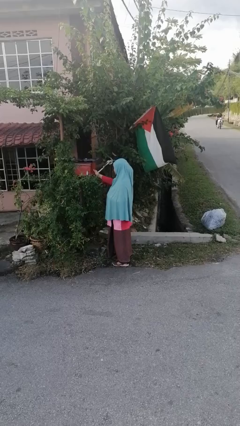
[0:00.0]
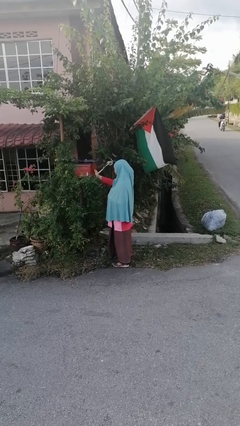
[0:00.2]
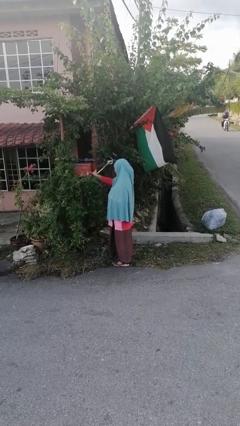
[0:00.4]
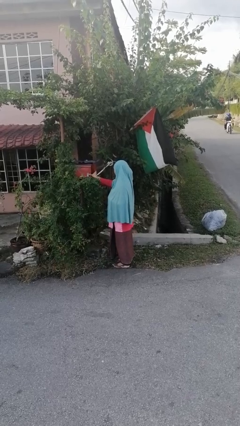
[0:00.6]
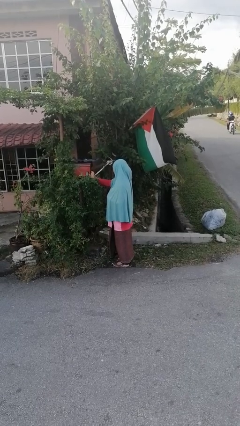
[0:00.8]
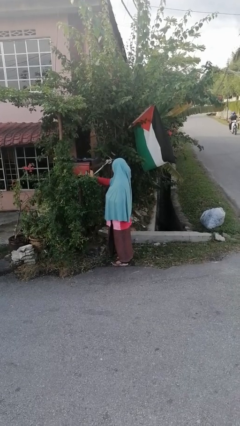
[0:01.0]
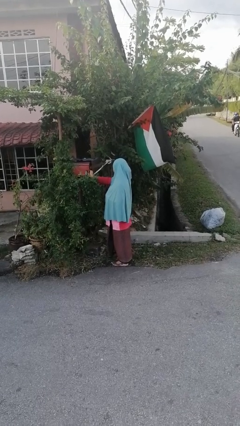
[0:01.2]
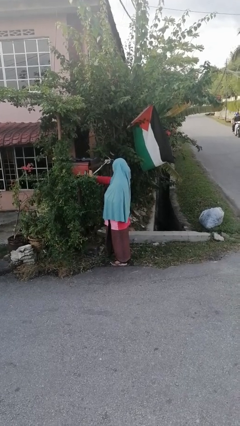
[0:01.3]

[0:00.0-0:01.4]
person closes mailbox

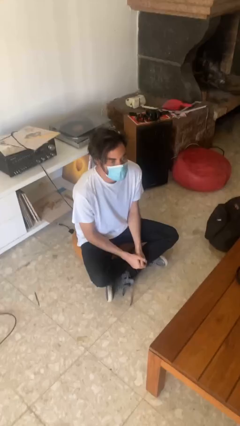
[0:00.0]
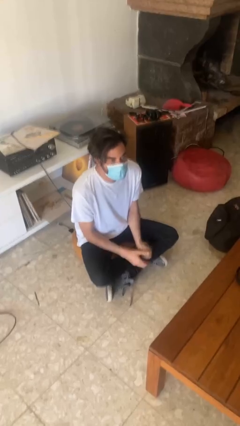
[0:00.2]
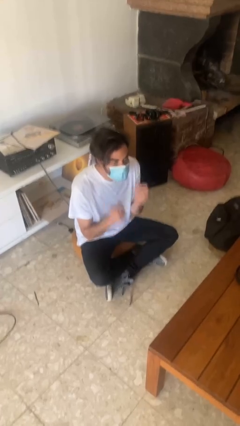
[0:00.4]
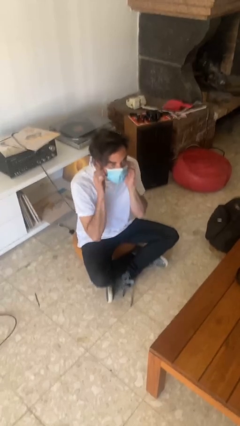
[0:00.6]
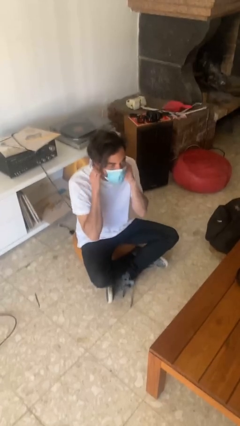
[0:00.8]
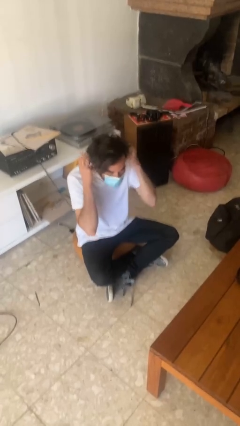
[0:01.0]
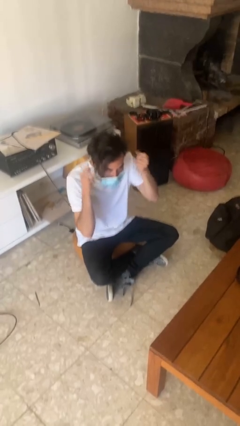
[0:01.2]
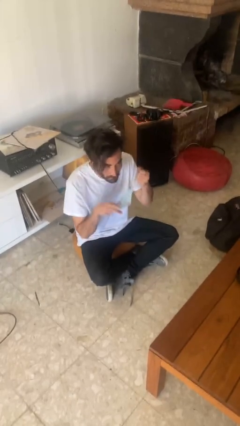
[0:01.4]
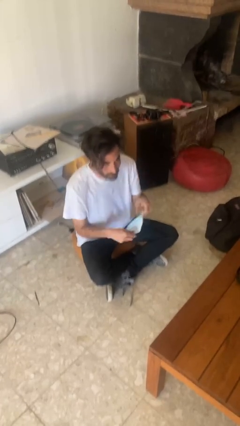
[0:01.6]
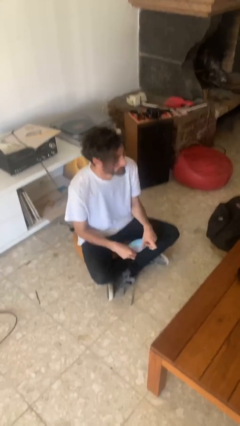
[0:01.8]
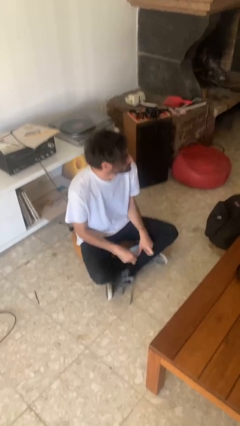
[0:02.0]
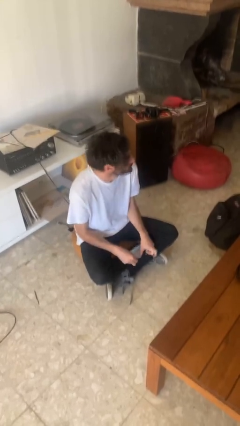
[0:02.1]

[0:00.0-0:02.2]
person takes off facemask

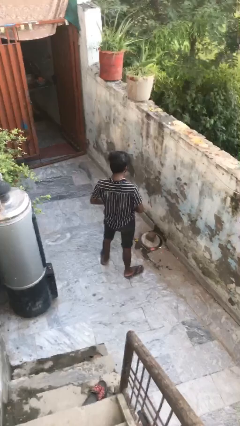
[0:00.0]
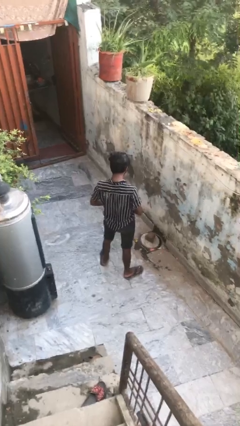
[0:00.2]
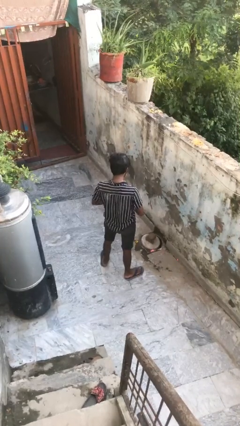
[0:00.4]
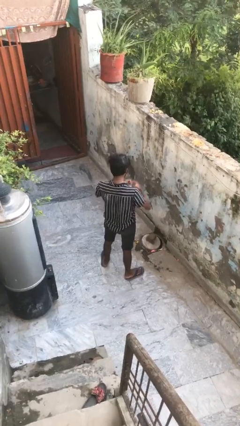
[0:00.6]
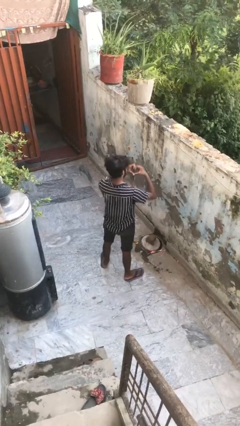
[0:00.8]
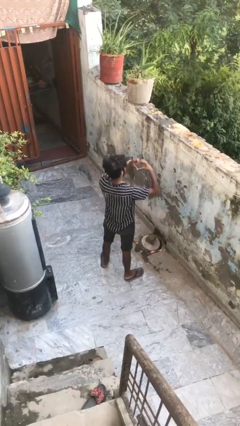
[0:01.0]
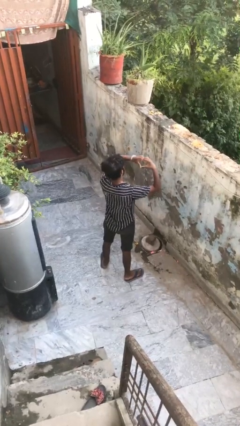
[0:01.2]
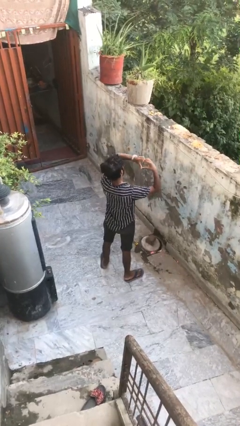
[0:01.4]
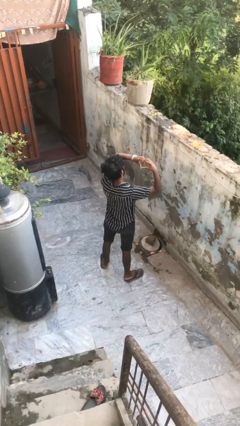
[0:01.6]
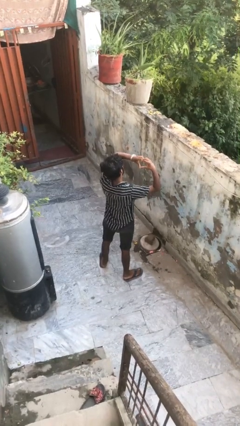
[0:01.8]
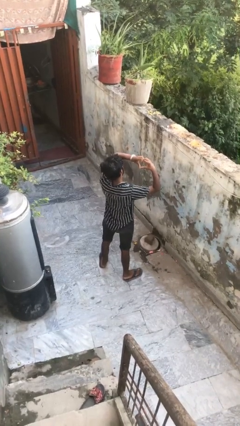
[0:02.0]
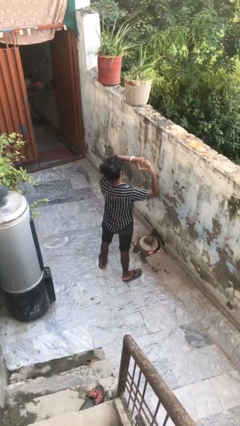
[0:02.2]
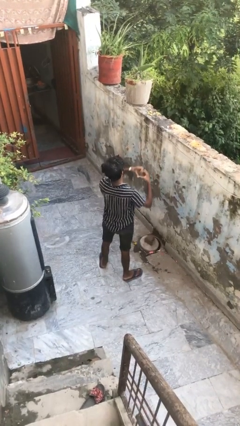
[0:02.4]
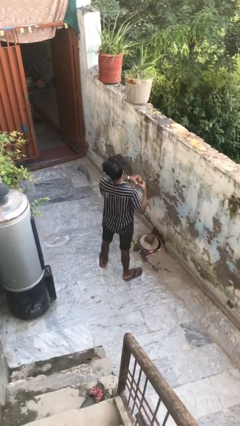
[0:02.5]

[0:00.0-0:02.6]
person gestures heart

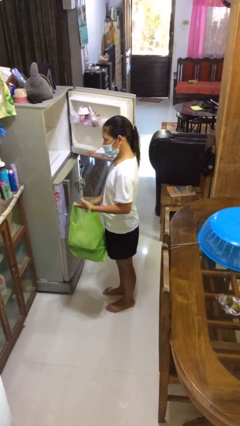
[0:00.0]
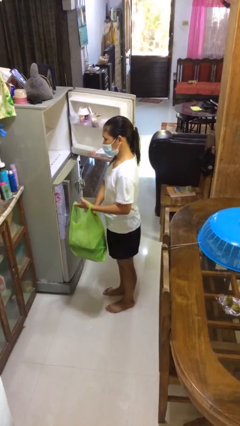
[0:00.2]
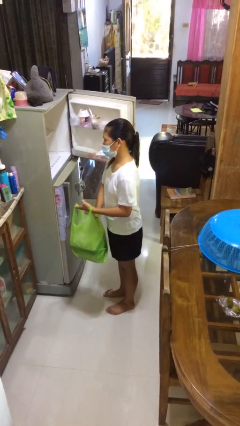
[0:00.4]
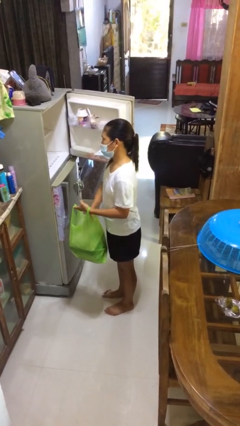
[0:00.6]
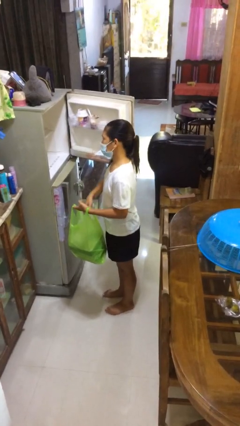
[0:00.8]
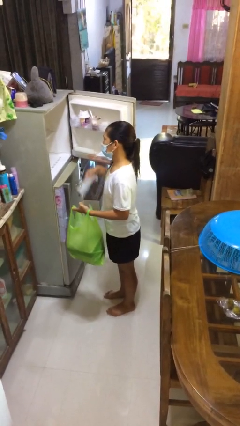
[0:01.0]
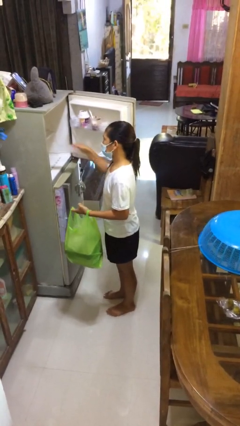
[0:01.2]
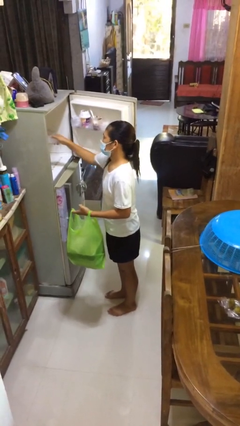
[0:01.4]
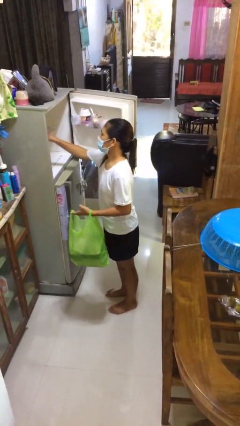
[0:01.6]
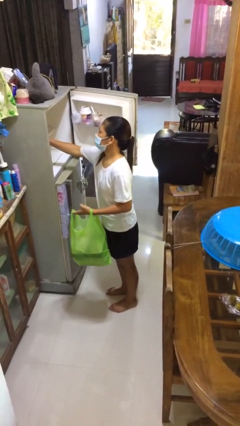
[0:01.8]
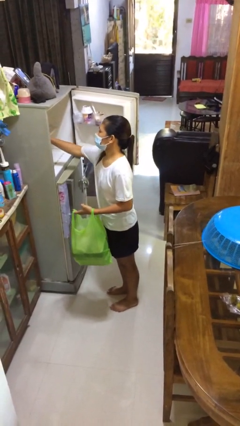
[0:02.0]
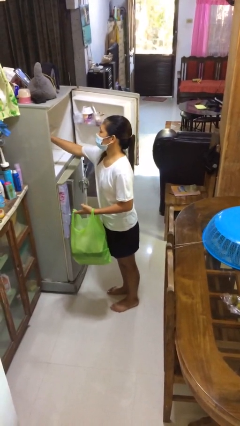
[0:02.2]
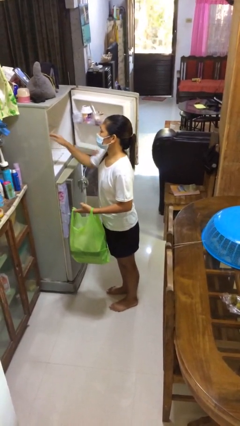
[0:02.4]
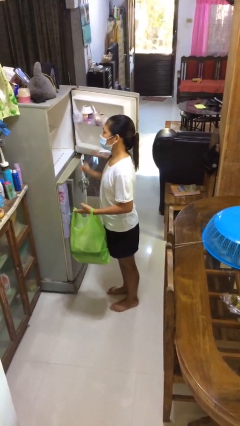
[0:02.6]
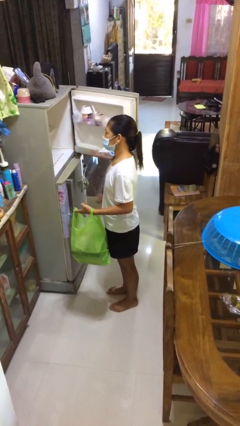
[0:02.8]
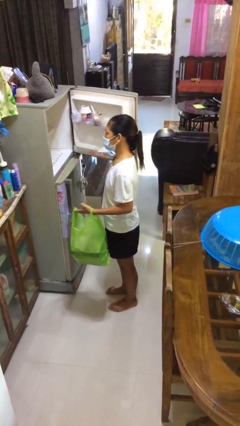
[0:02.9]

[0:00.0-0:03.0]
person loads groceries into refrigerator

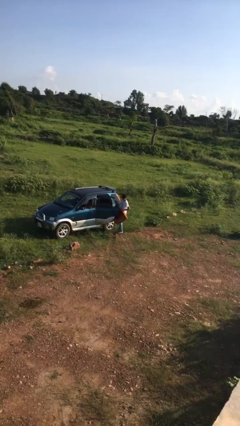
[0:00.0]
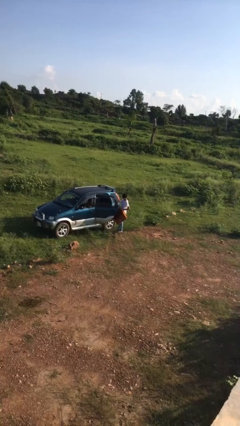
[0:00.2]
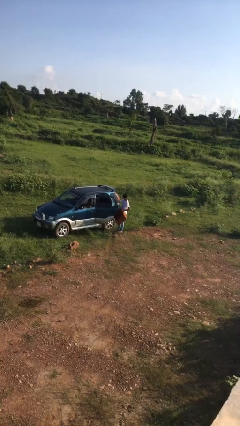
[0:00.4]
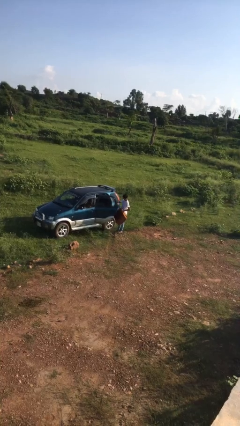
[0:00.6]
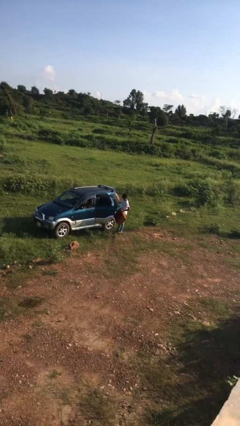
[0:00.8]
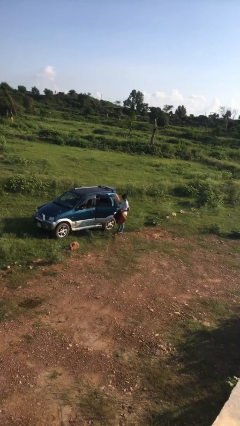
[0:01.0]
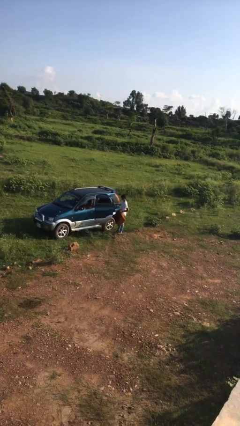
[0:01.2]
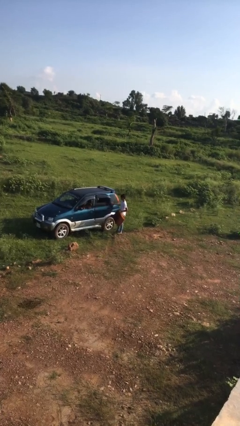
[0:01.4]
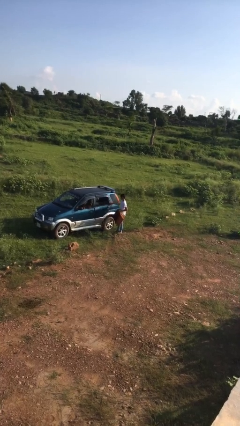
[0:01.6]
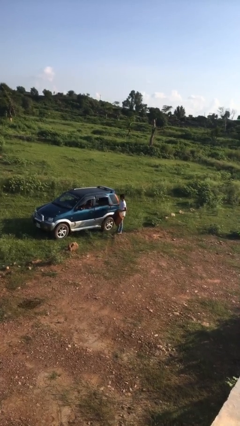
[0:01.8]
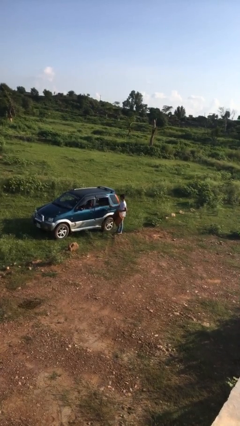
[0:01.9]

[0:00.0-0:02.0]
person closes car door

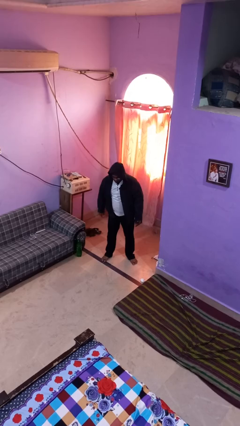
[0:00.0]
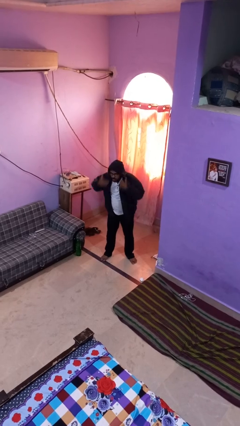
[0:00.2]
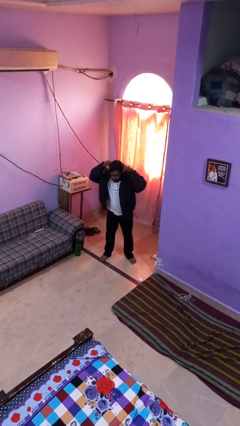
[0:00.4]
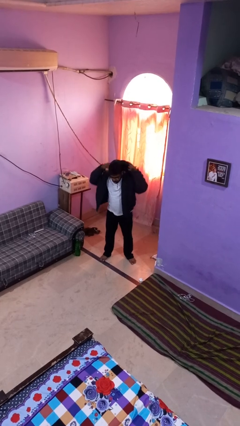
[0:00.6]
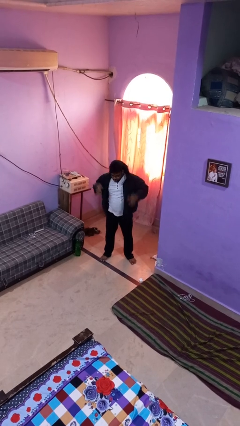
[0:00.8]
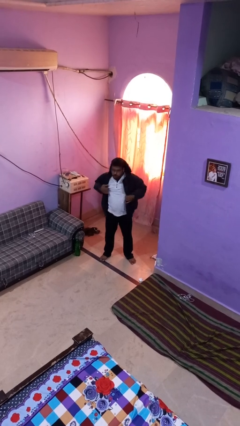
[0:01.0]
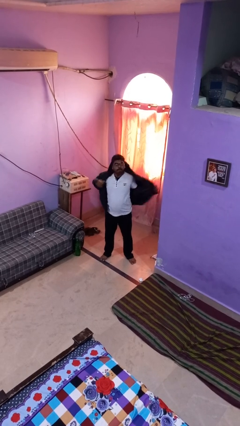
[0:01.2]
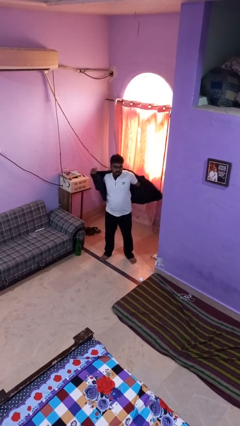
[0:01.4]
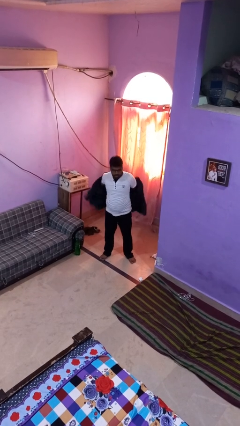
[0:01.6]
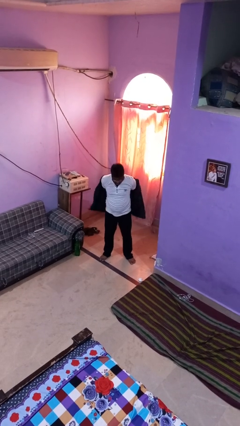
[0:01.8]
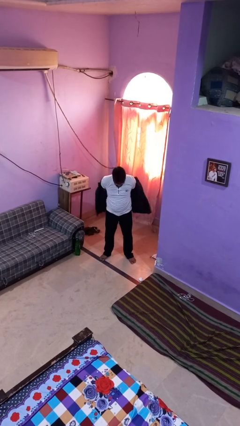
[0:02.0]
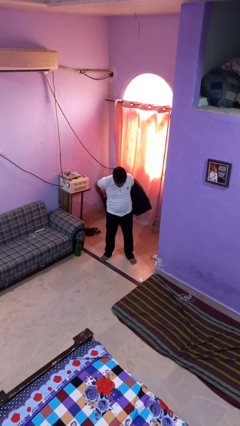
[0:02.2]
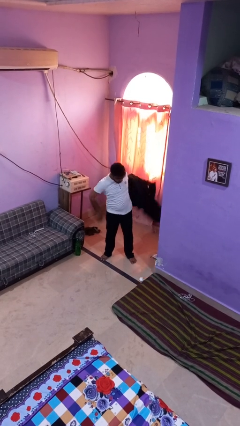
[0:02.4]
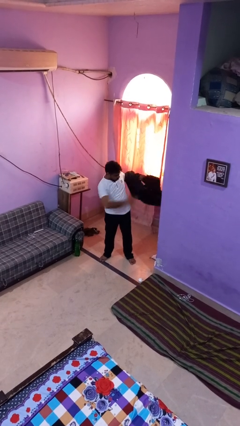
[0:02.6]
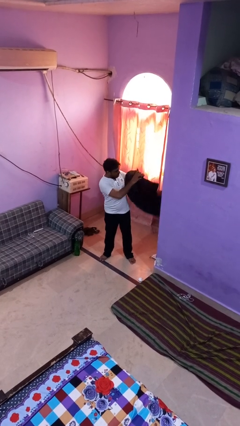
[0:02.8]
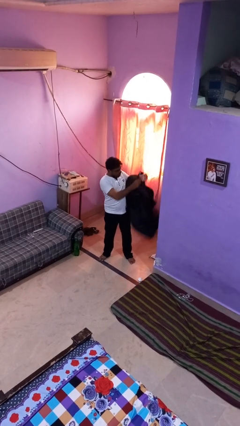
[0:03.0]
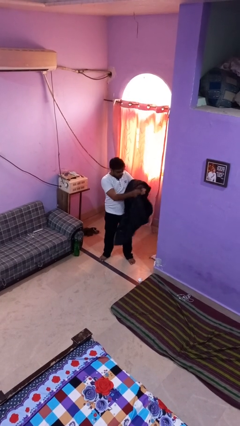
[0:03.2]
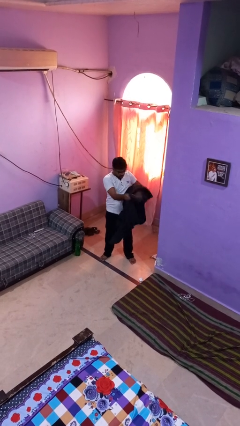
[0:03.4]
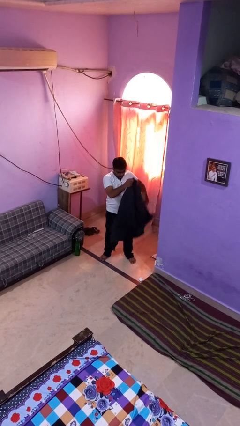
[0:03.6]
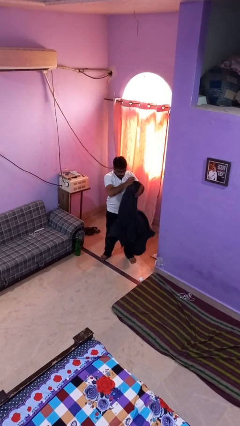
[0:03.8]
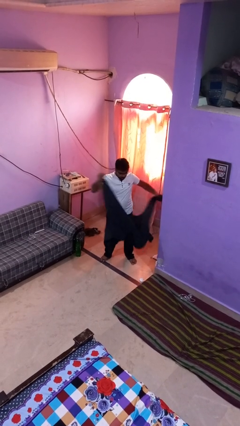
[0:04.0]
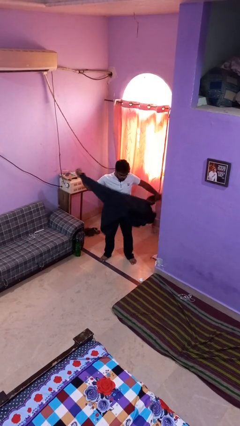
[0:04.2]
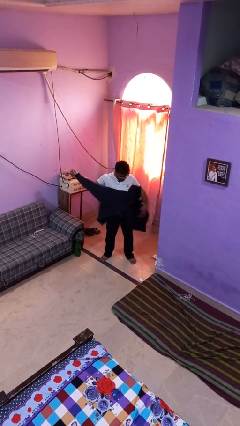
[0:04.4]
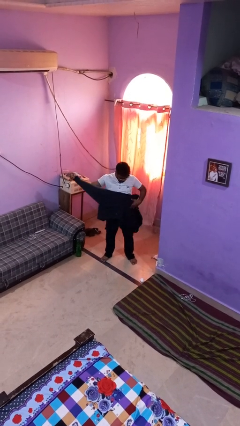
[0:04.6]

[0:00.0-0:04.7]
person takes off hoodie

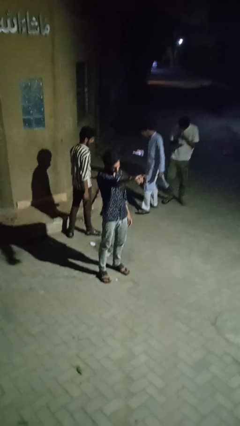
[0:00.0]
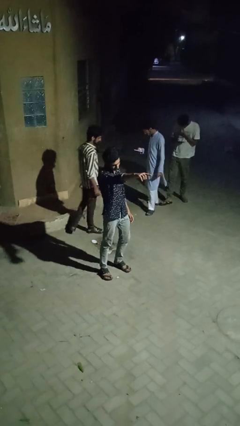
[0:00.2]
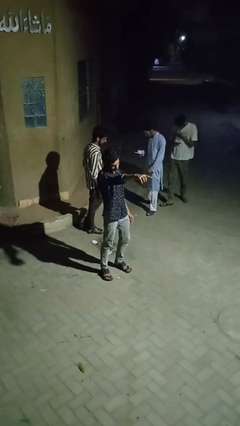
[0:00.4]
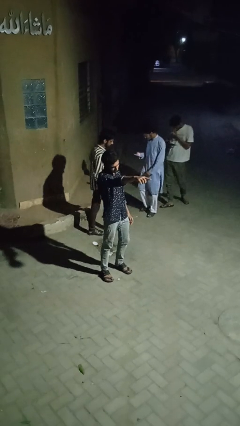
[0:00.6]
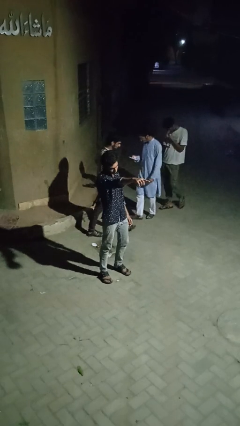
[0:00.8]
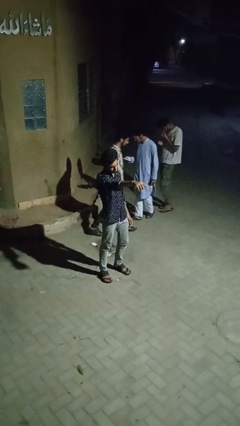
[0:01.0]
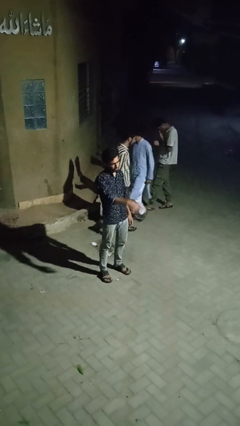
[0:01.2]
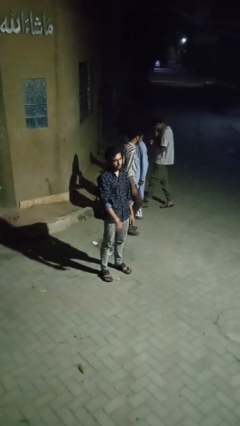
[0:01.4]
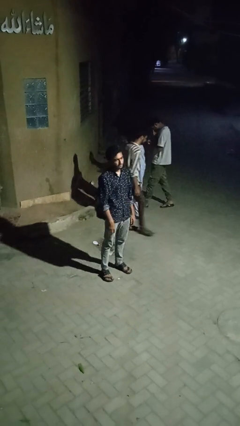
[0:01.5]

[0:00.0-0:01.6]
person points at person
